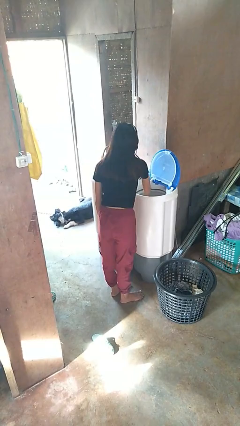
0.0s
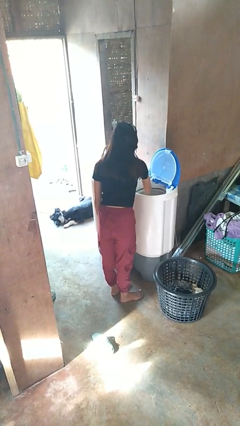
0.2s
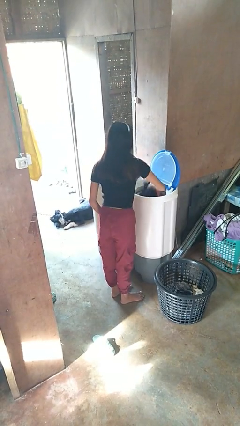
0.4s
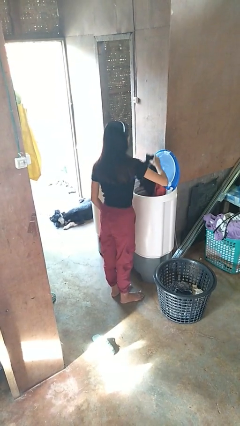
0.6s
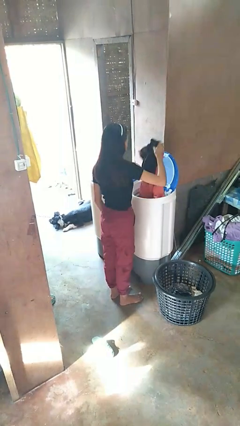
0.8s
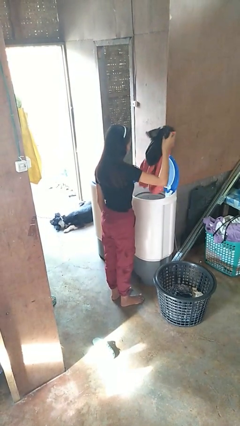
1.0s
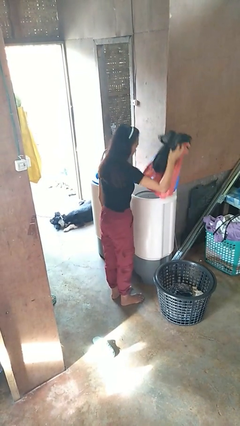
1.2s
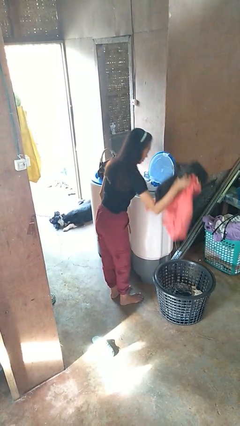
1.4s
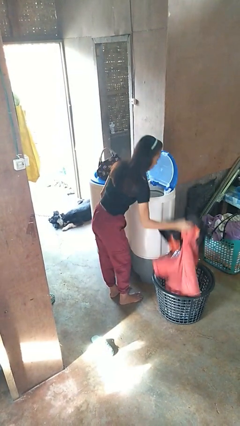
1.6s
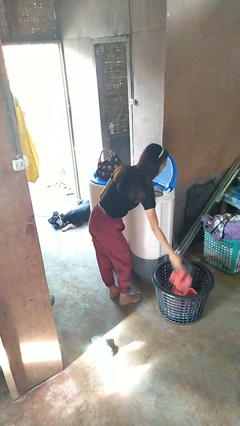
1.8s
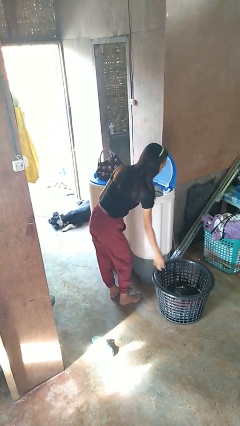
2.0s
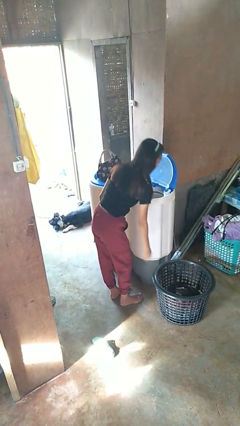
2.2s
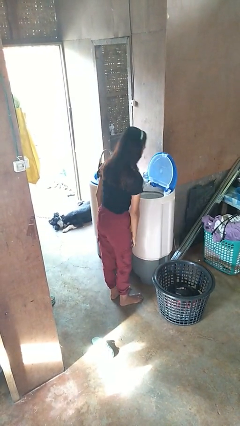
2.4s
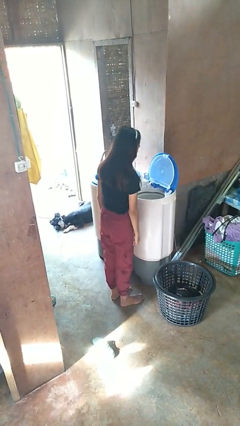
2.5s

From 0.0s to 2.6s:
person unloads clotheswasher

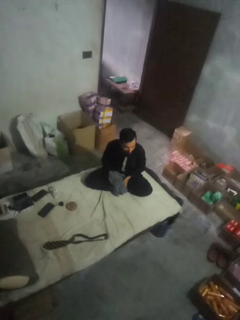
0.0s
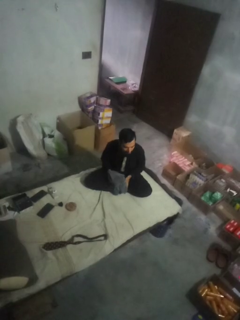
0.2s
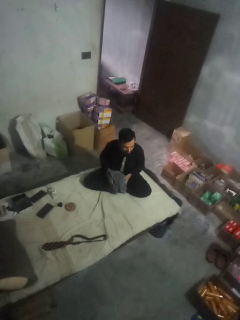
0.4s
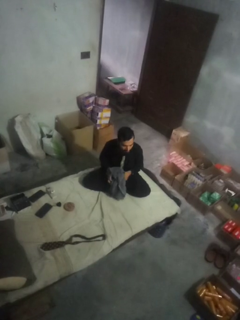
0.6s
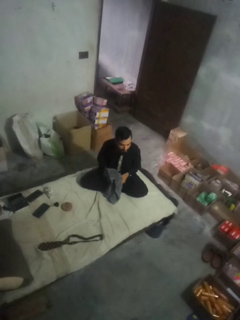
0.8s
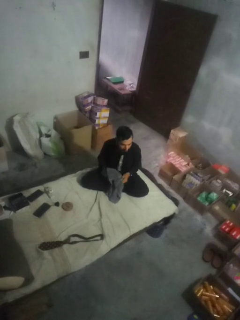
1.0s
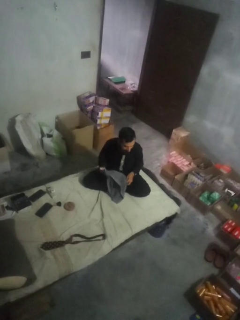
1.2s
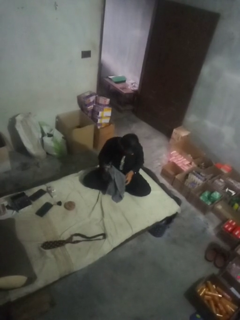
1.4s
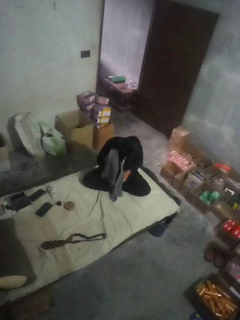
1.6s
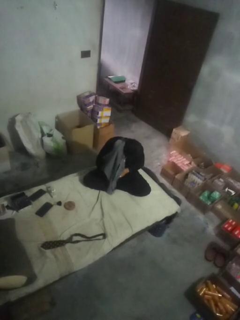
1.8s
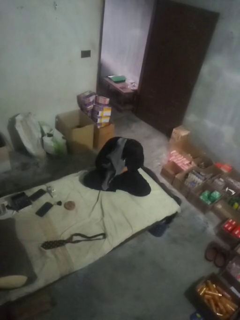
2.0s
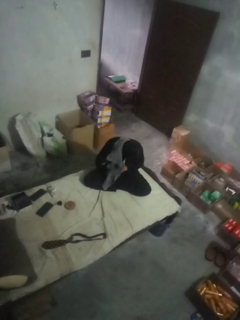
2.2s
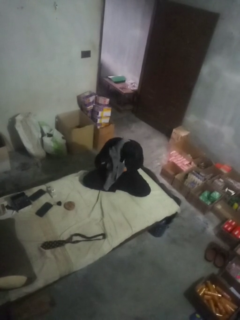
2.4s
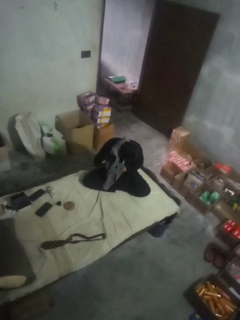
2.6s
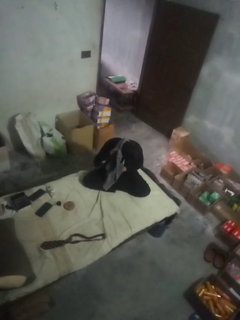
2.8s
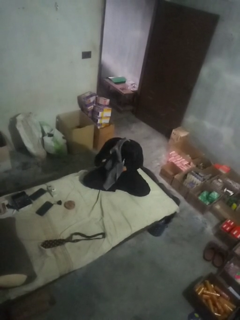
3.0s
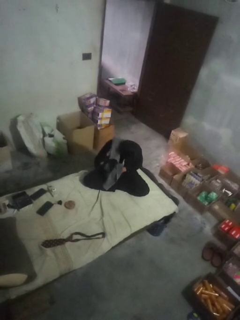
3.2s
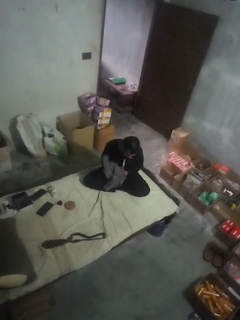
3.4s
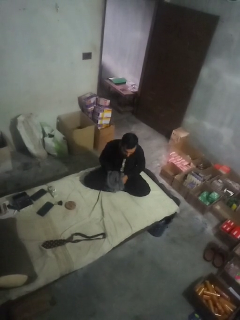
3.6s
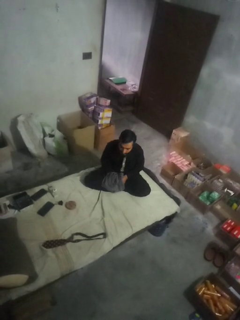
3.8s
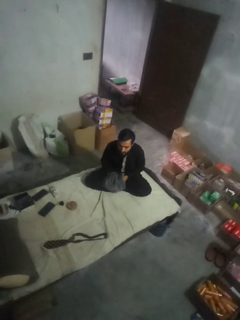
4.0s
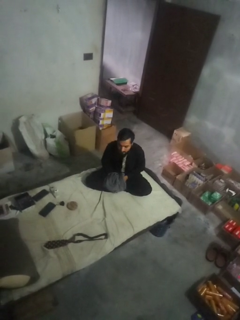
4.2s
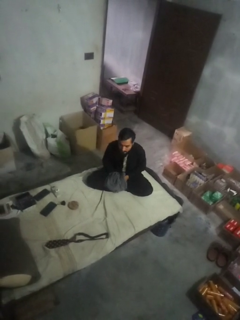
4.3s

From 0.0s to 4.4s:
person dries hair with towel

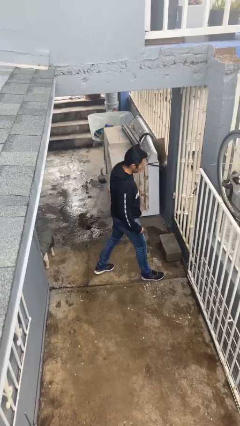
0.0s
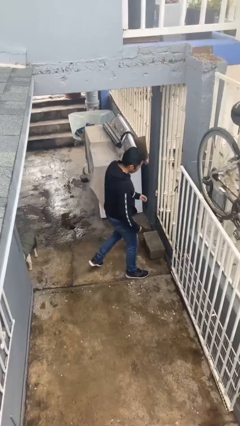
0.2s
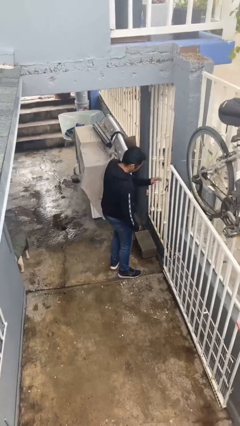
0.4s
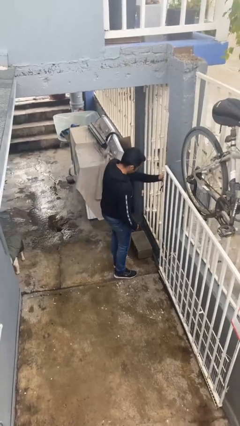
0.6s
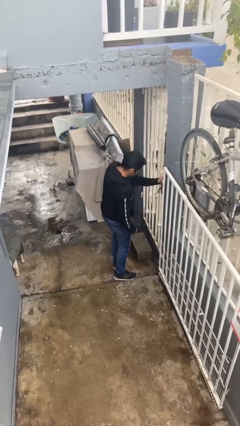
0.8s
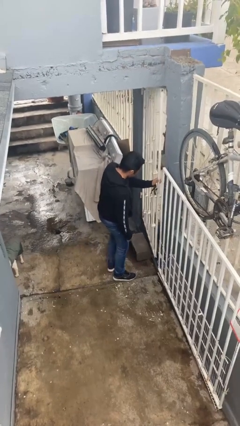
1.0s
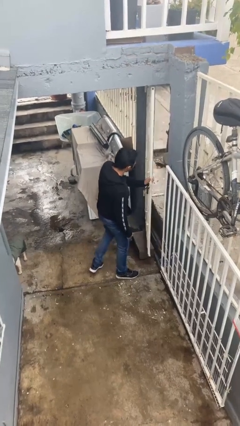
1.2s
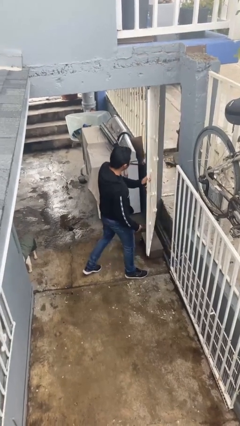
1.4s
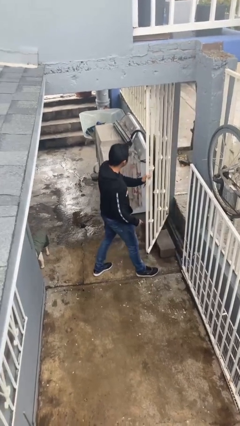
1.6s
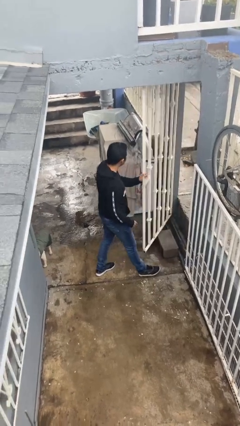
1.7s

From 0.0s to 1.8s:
person opens facility door

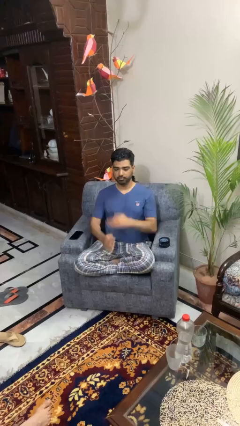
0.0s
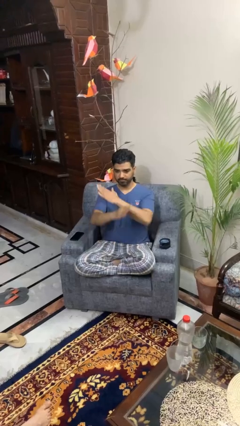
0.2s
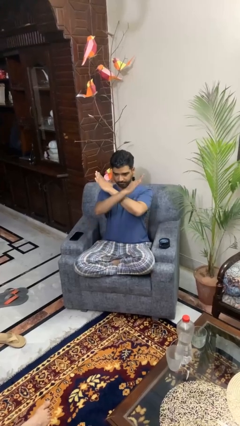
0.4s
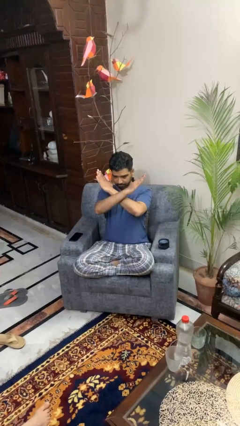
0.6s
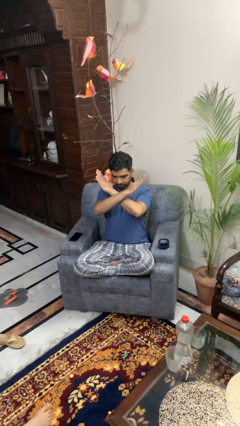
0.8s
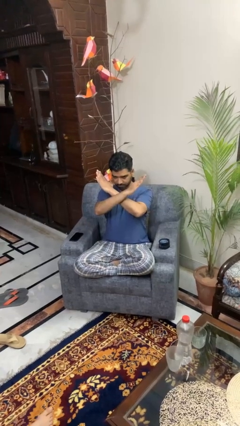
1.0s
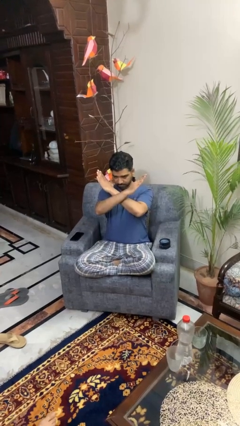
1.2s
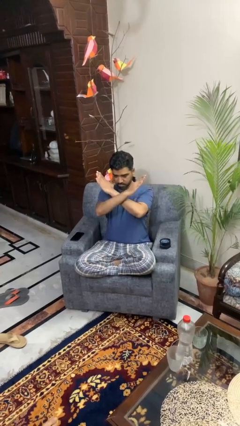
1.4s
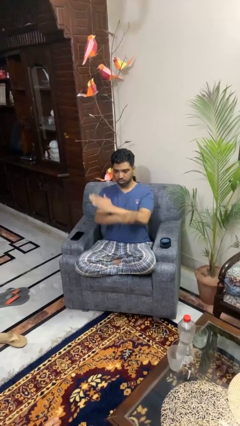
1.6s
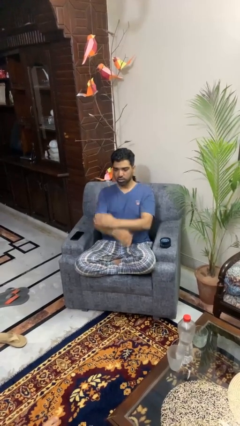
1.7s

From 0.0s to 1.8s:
person gestures arms x

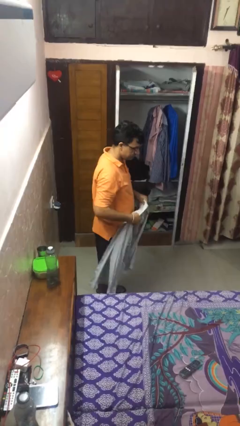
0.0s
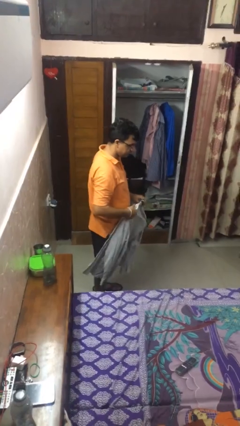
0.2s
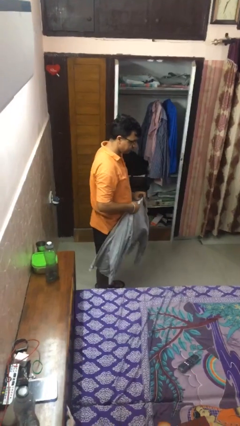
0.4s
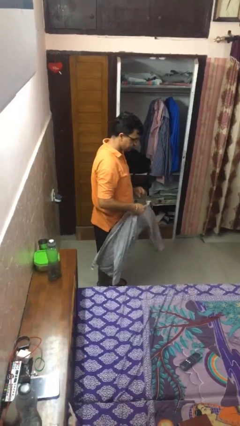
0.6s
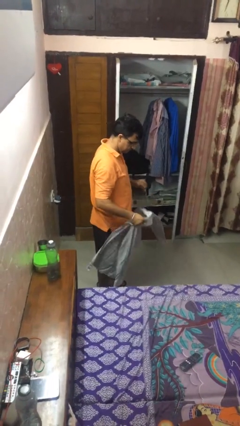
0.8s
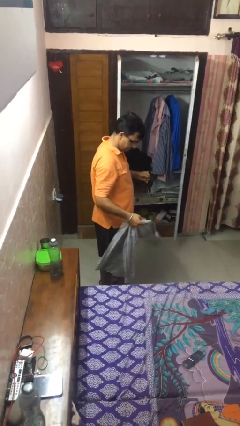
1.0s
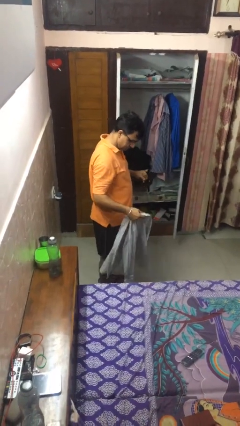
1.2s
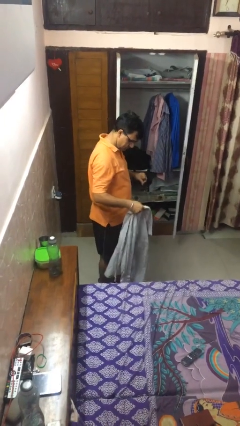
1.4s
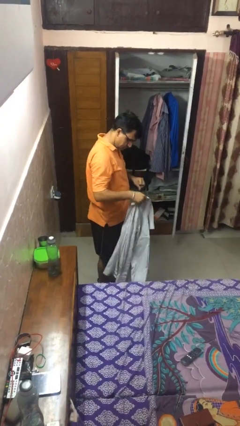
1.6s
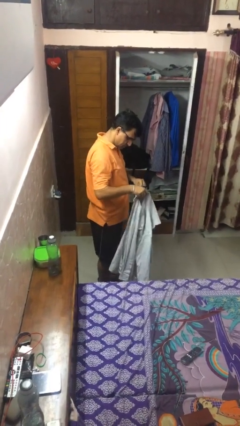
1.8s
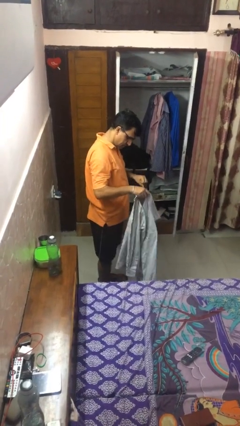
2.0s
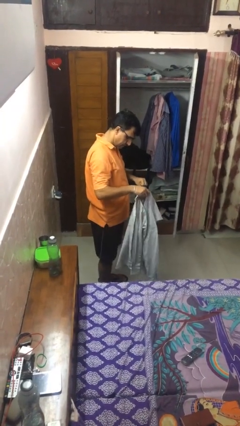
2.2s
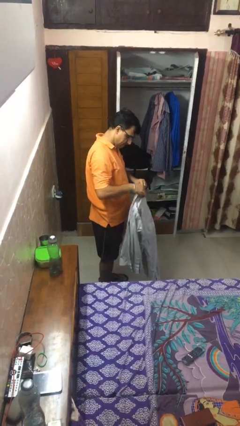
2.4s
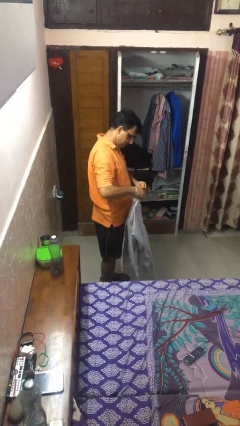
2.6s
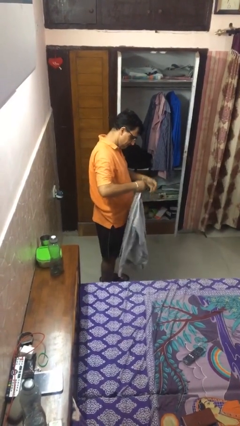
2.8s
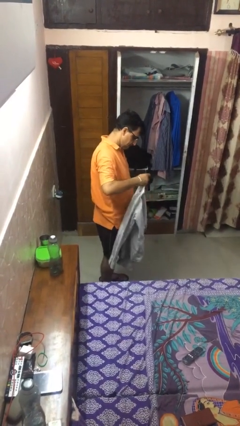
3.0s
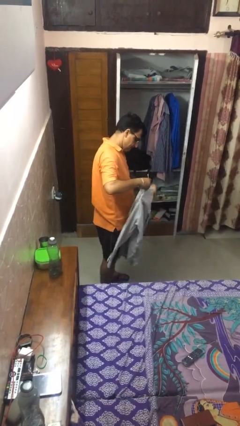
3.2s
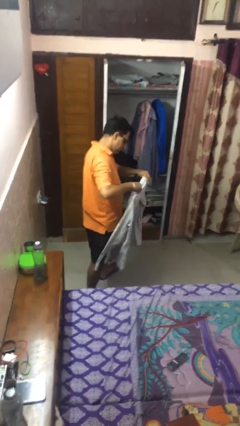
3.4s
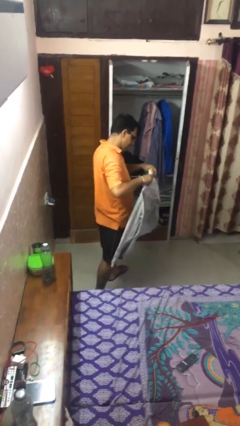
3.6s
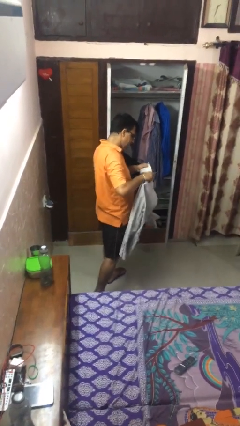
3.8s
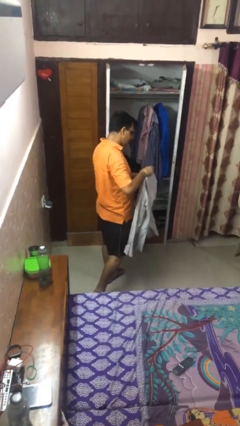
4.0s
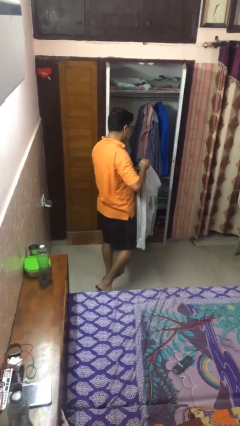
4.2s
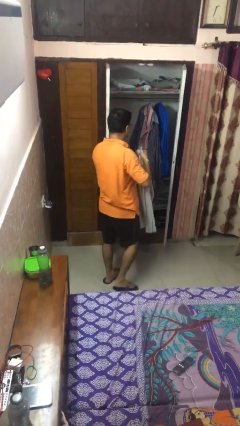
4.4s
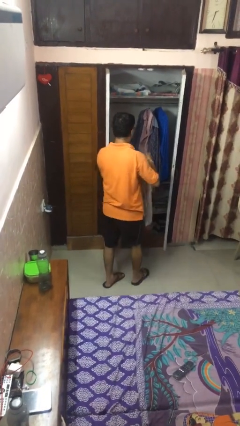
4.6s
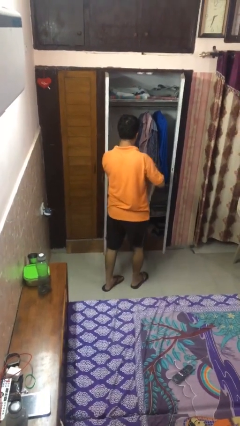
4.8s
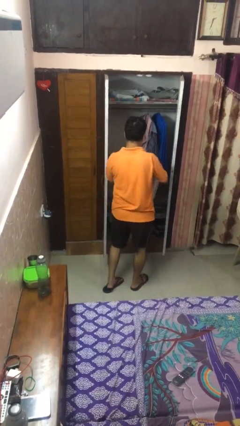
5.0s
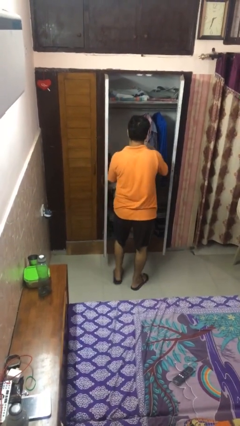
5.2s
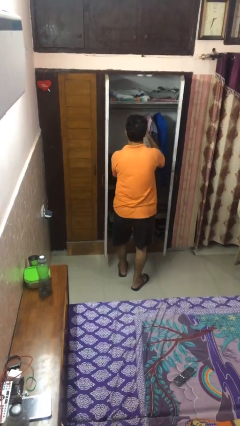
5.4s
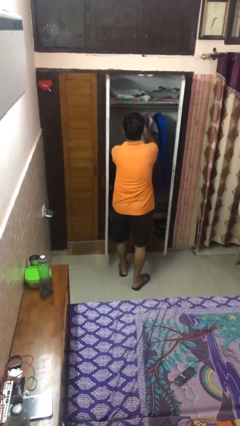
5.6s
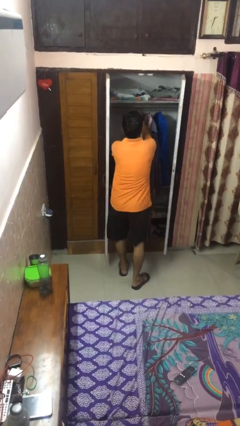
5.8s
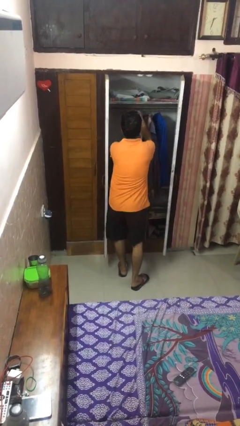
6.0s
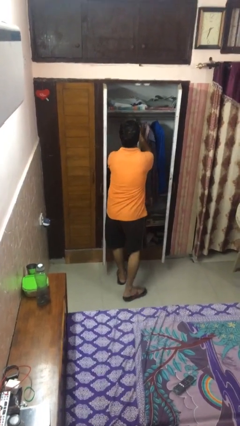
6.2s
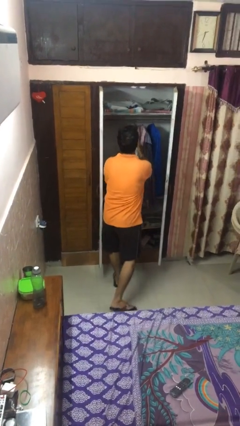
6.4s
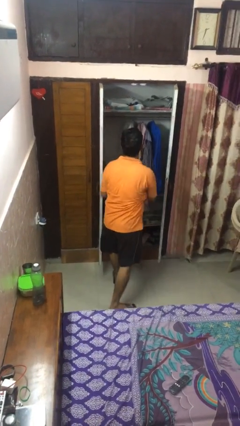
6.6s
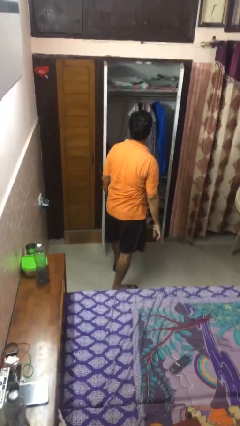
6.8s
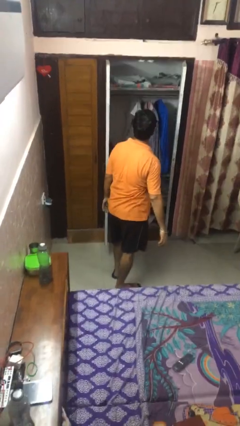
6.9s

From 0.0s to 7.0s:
person puts clothes into closet

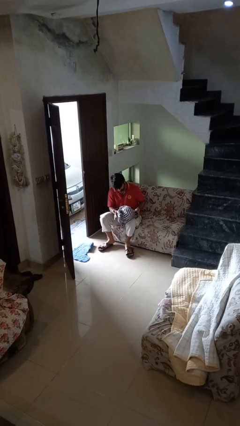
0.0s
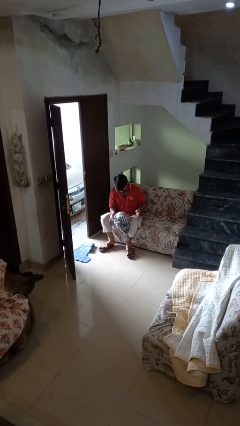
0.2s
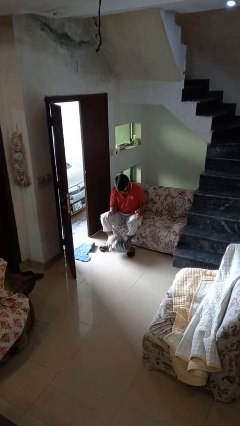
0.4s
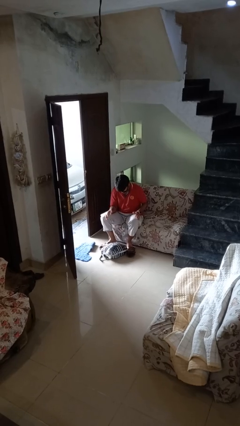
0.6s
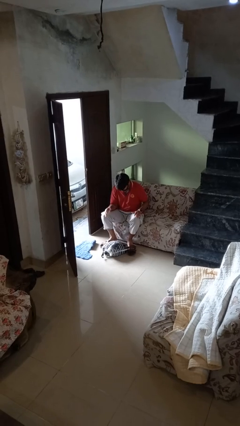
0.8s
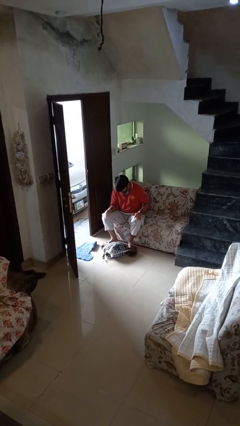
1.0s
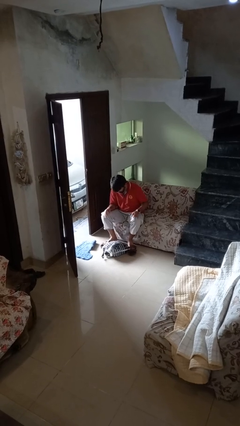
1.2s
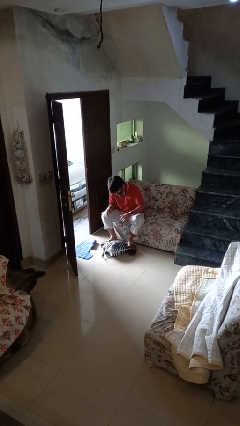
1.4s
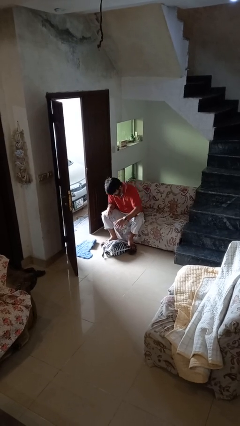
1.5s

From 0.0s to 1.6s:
person drops object
